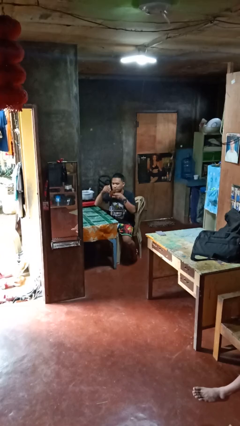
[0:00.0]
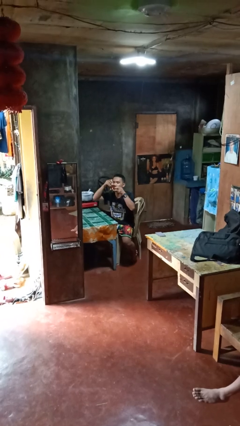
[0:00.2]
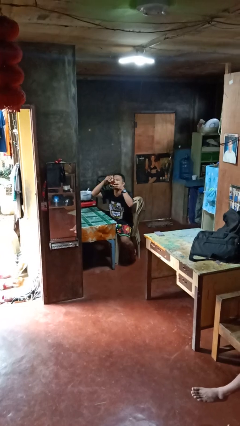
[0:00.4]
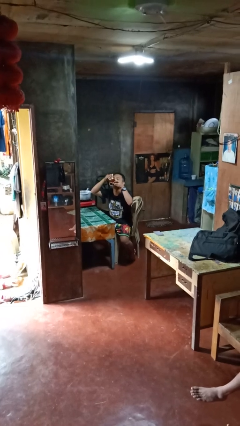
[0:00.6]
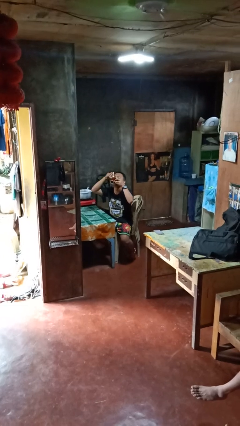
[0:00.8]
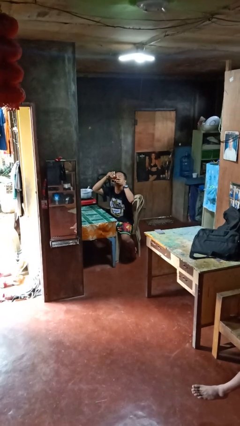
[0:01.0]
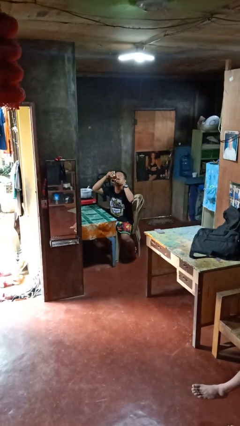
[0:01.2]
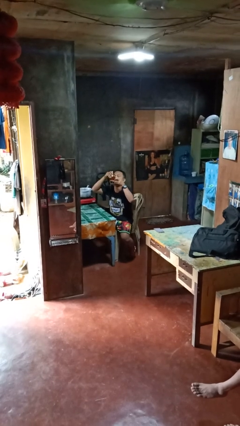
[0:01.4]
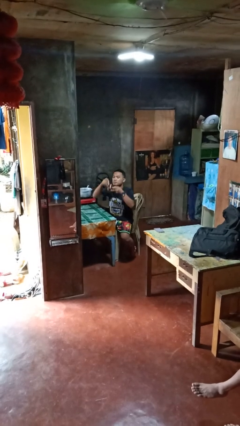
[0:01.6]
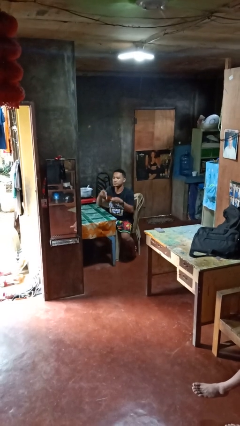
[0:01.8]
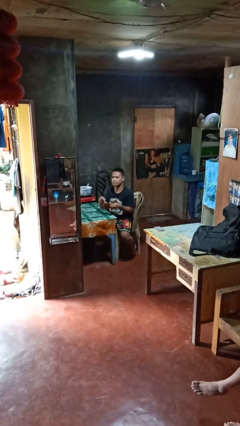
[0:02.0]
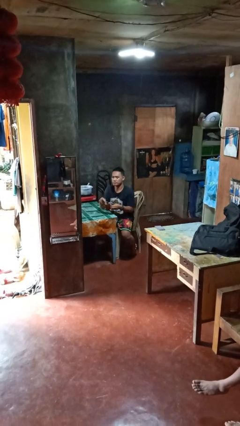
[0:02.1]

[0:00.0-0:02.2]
person drinks from mug

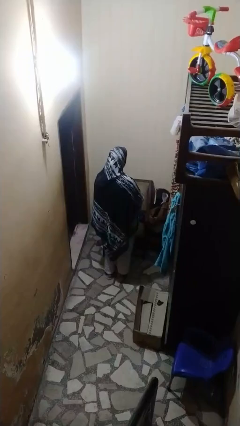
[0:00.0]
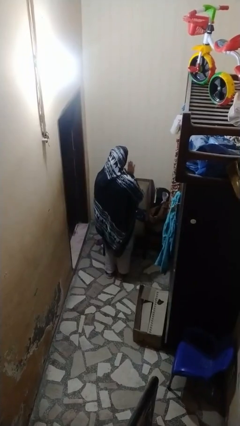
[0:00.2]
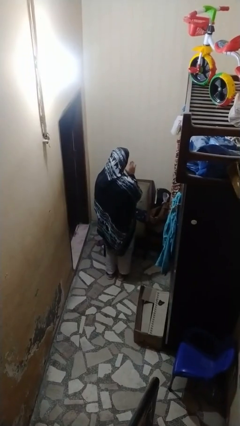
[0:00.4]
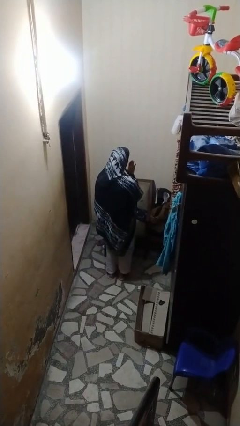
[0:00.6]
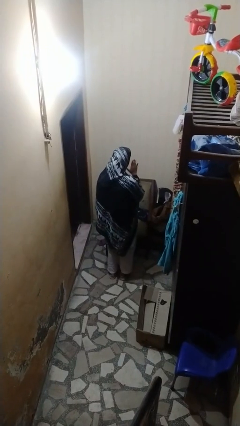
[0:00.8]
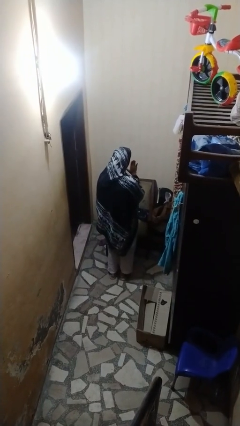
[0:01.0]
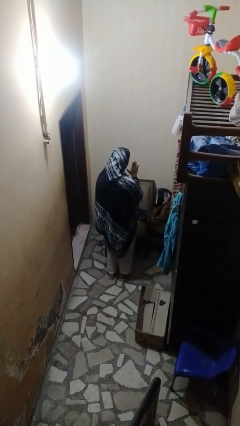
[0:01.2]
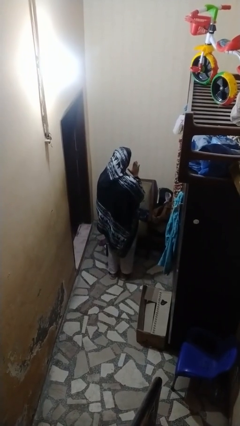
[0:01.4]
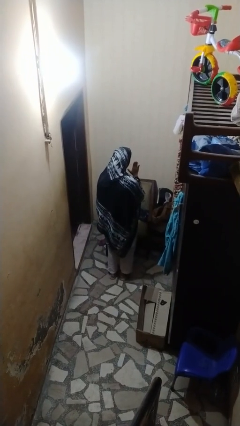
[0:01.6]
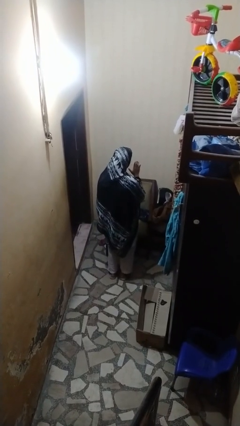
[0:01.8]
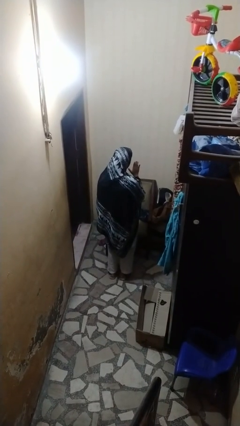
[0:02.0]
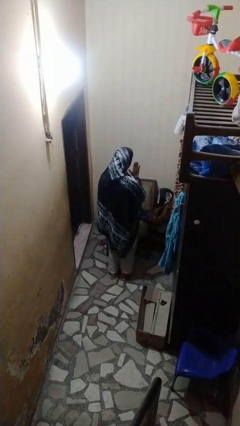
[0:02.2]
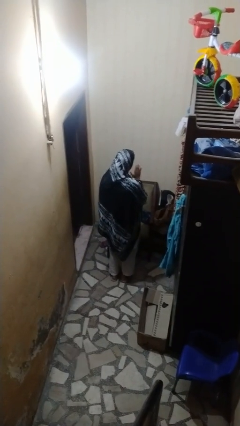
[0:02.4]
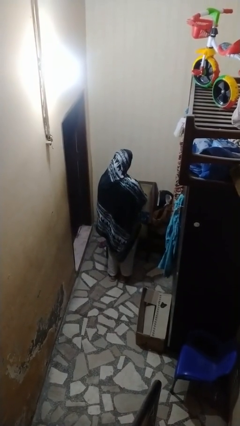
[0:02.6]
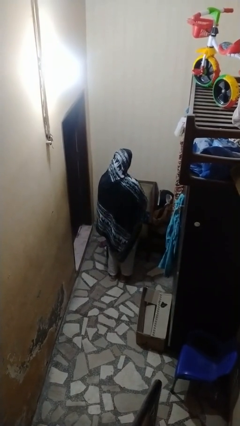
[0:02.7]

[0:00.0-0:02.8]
person gestures stop

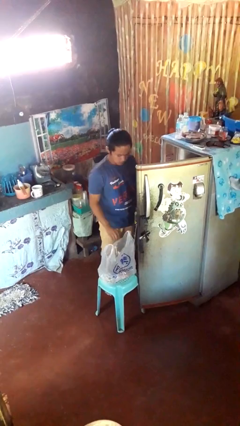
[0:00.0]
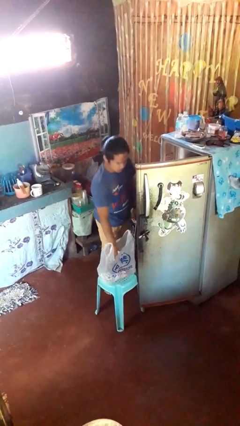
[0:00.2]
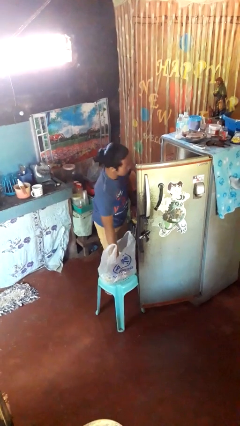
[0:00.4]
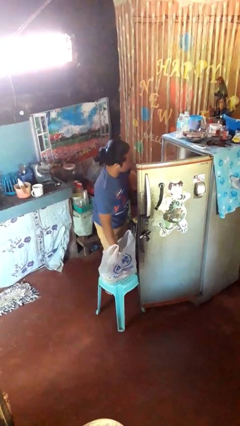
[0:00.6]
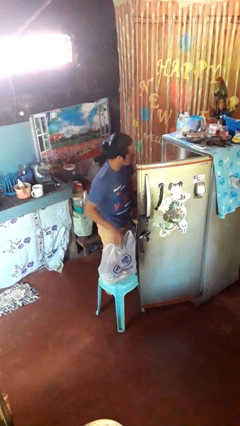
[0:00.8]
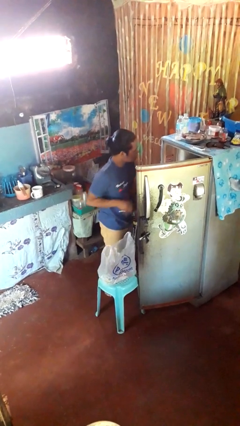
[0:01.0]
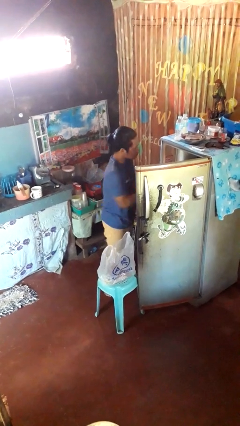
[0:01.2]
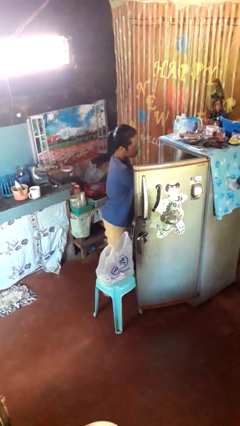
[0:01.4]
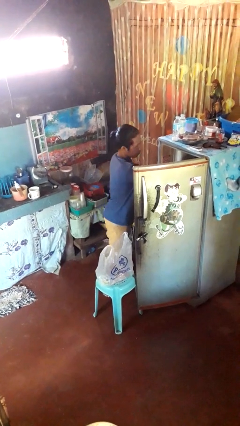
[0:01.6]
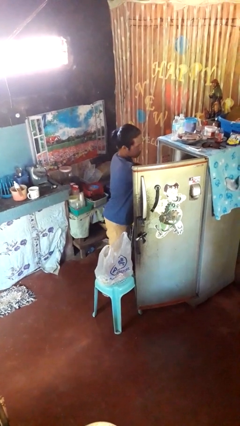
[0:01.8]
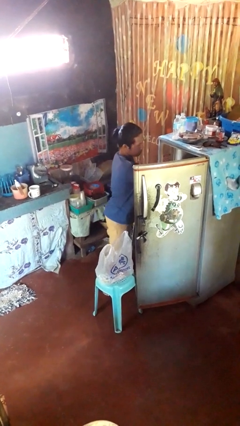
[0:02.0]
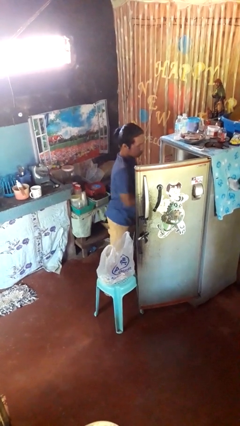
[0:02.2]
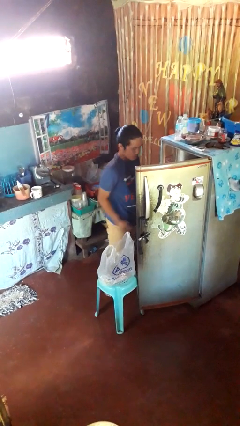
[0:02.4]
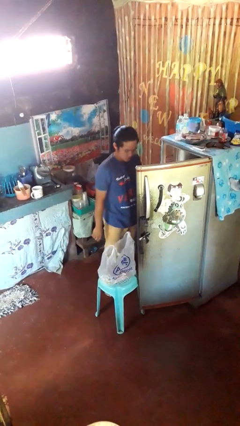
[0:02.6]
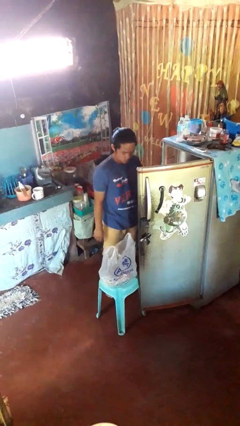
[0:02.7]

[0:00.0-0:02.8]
person loads groceries into refrigerator

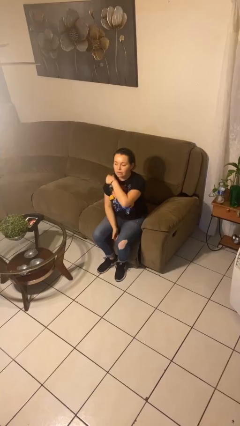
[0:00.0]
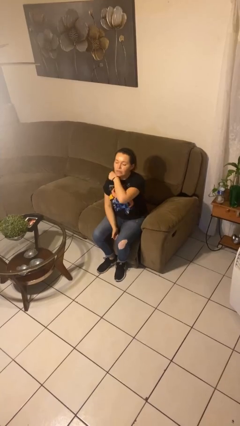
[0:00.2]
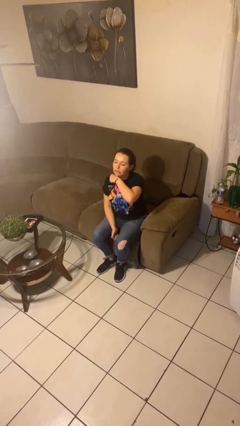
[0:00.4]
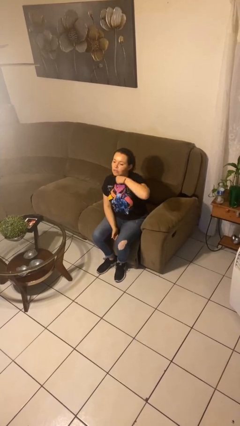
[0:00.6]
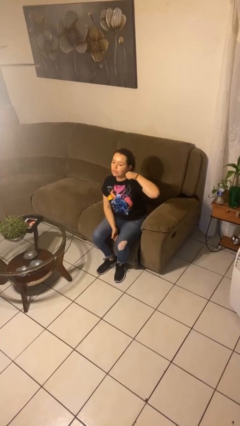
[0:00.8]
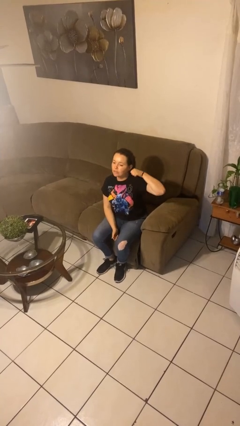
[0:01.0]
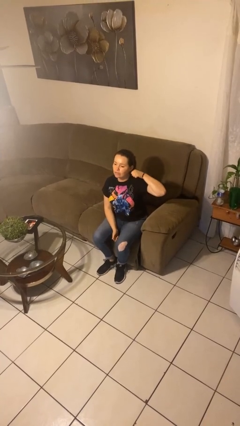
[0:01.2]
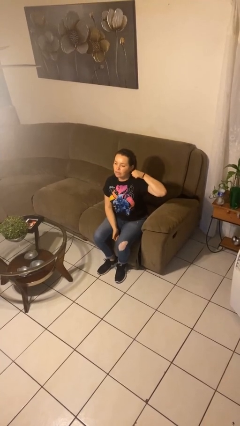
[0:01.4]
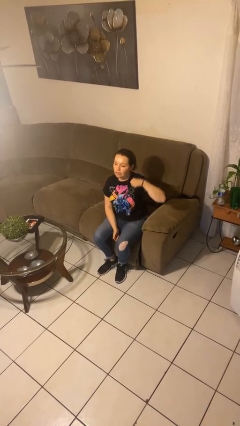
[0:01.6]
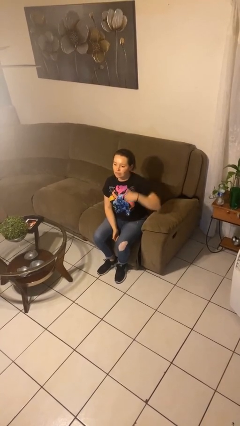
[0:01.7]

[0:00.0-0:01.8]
person gestures cut

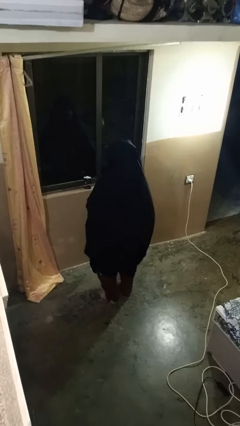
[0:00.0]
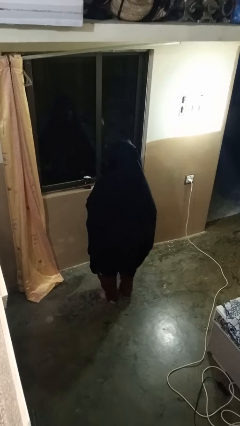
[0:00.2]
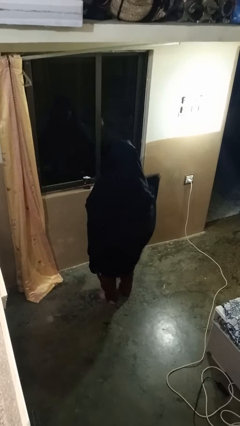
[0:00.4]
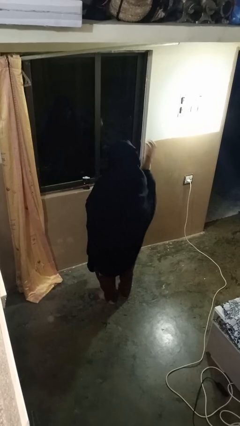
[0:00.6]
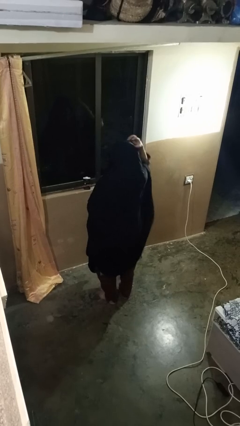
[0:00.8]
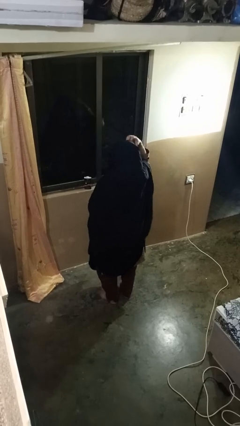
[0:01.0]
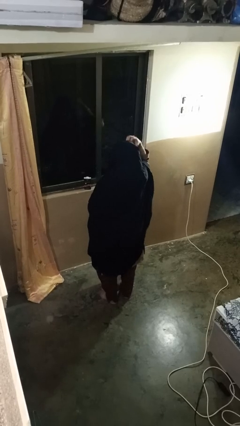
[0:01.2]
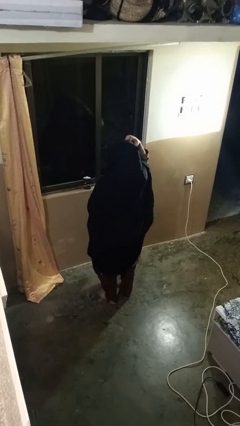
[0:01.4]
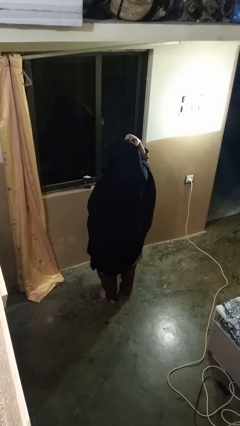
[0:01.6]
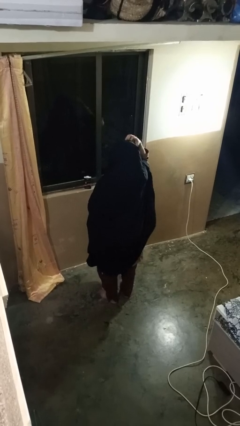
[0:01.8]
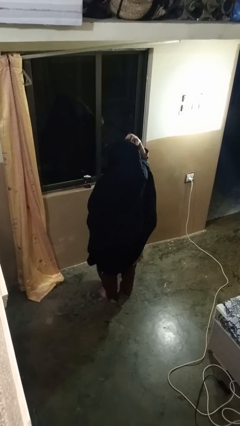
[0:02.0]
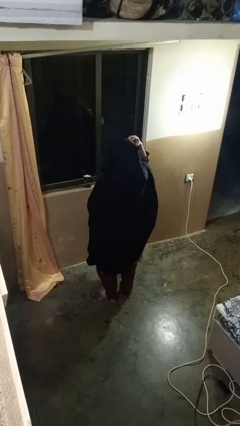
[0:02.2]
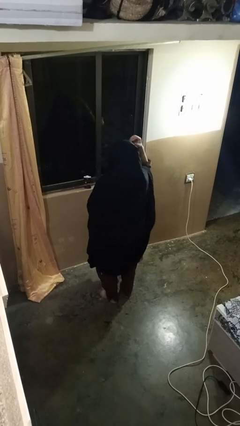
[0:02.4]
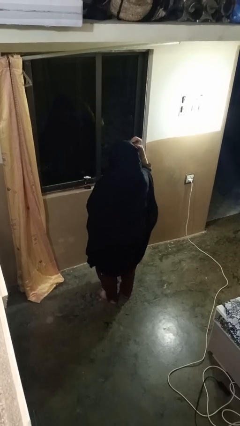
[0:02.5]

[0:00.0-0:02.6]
person scratches face

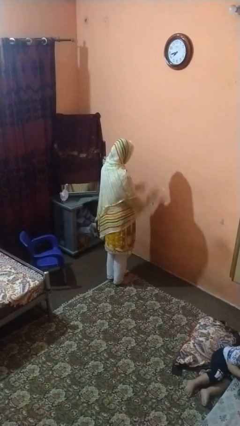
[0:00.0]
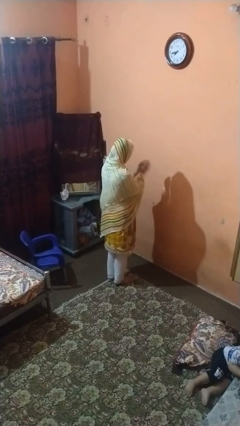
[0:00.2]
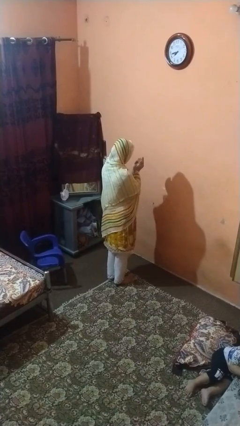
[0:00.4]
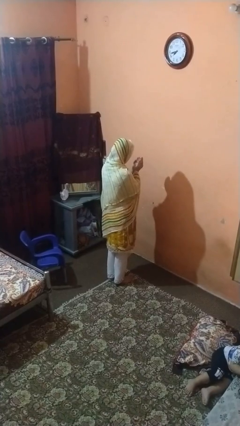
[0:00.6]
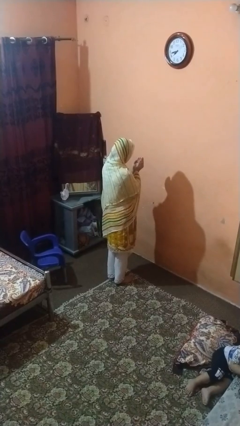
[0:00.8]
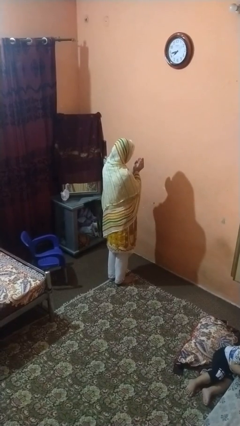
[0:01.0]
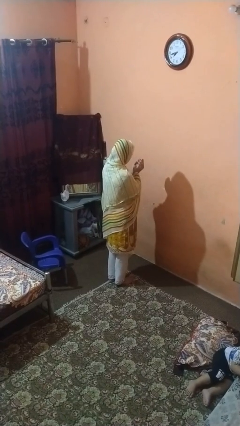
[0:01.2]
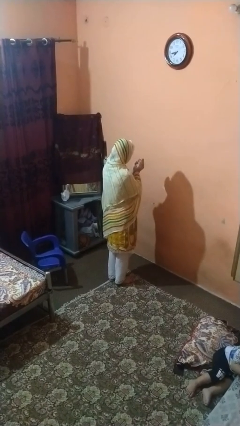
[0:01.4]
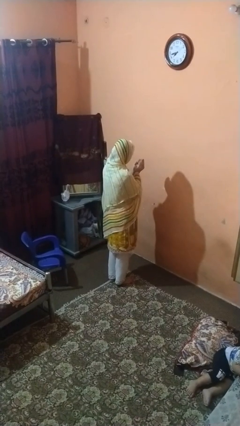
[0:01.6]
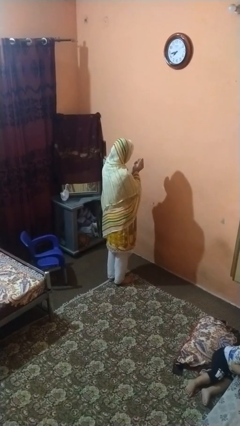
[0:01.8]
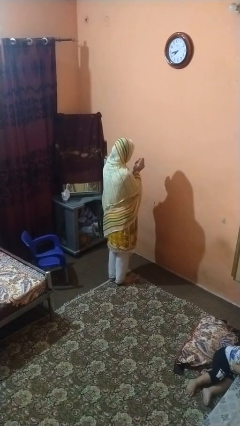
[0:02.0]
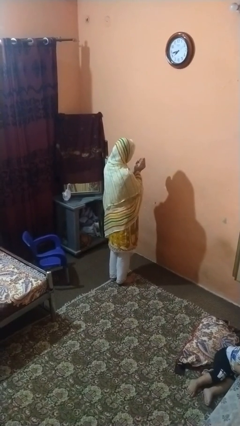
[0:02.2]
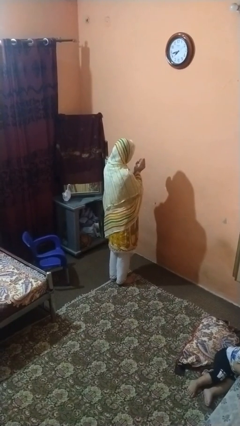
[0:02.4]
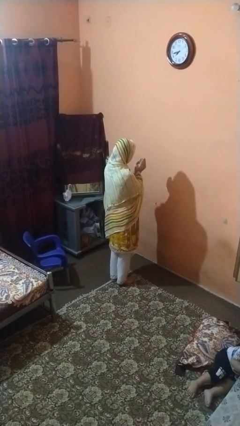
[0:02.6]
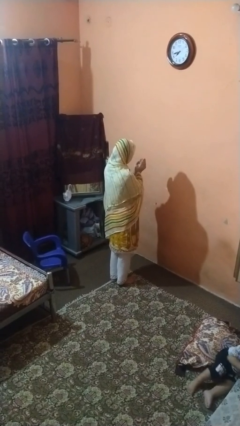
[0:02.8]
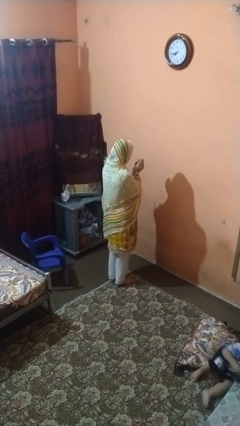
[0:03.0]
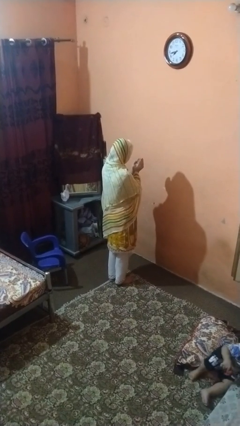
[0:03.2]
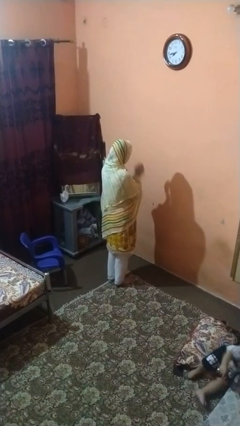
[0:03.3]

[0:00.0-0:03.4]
person prays

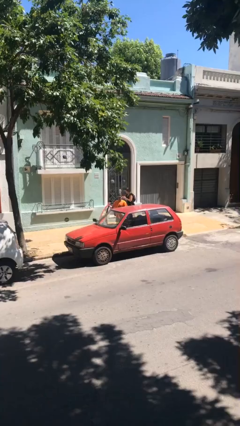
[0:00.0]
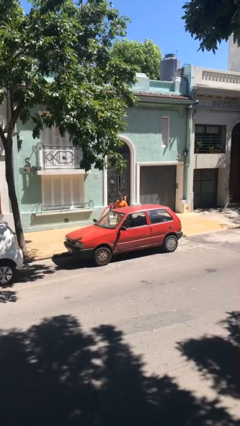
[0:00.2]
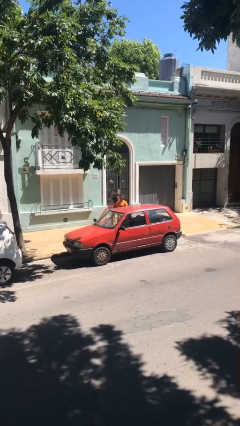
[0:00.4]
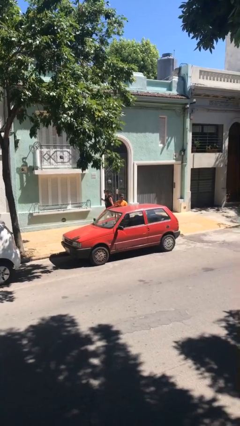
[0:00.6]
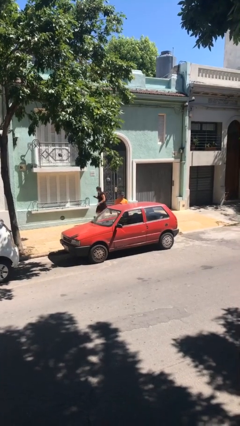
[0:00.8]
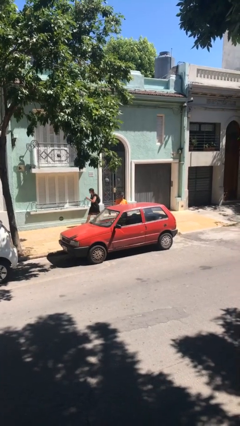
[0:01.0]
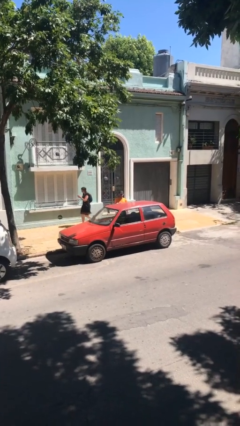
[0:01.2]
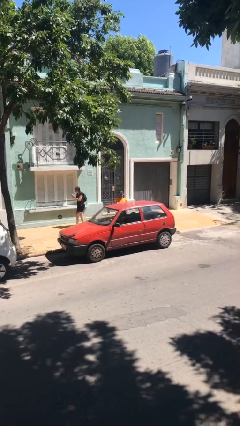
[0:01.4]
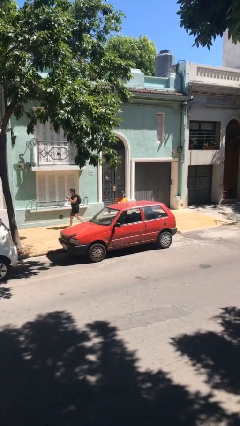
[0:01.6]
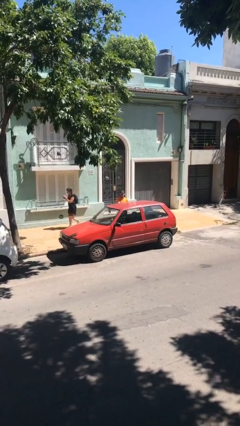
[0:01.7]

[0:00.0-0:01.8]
person closes car door
